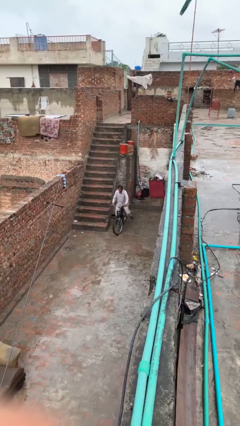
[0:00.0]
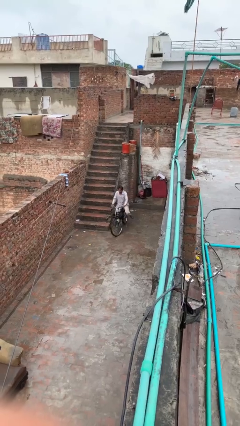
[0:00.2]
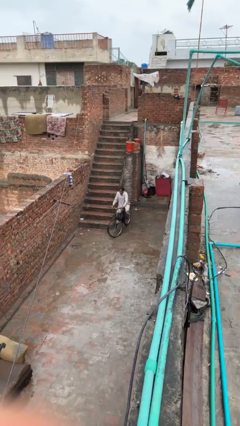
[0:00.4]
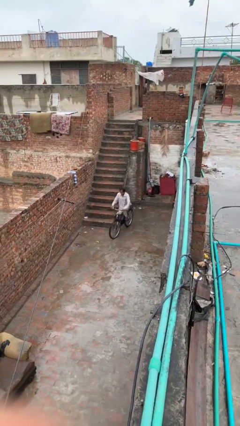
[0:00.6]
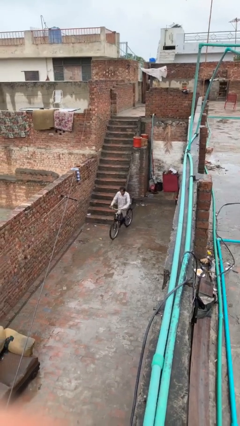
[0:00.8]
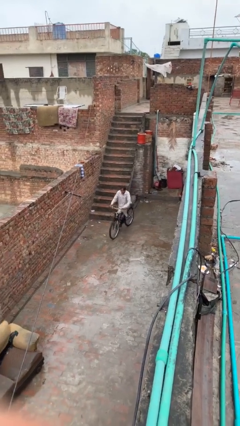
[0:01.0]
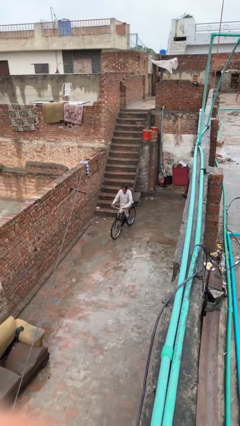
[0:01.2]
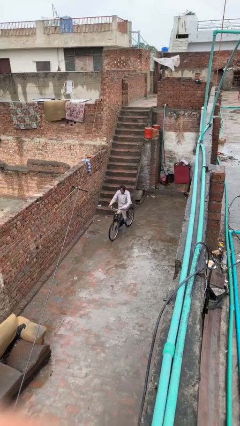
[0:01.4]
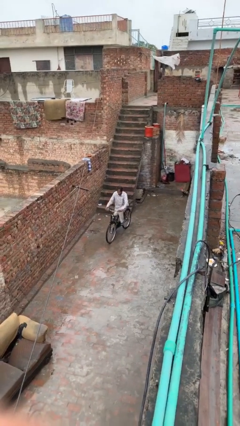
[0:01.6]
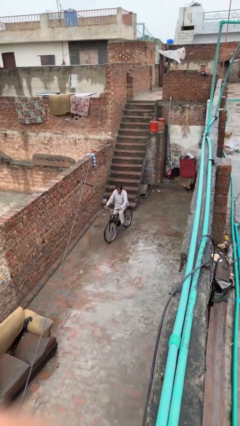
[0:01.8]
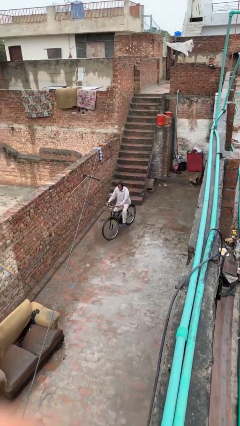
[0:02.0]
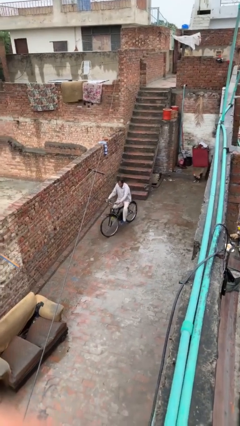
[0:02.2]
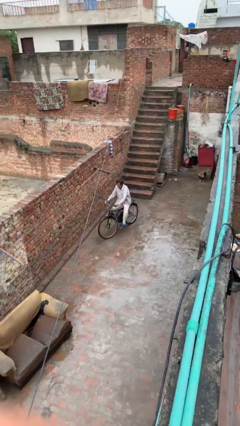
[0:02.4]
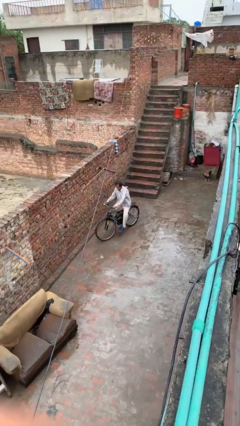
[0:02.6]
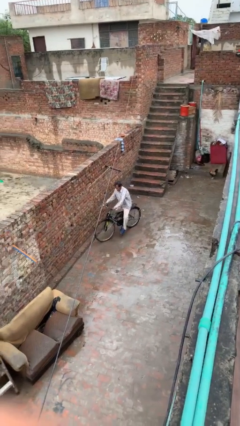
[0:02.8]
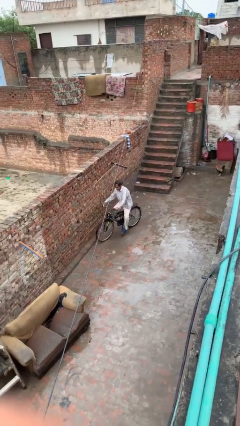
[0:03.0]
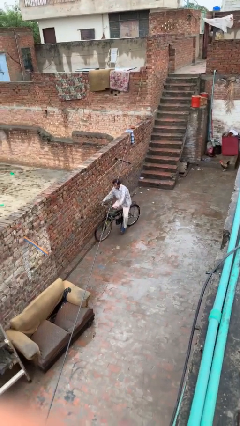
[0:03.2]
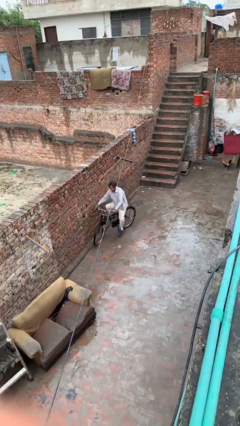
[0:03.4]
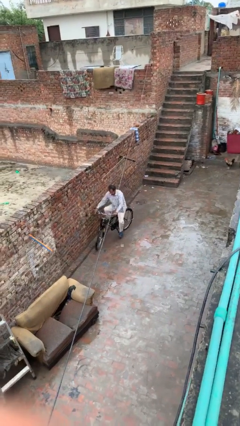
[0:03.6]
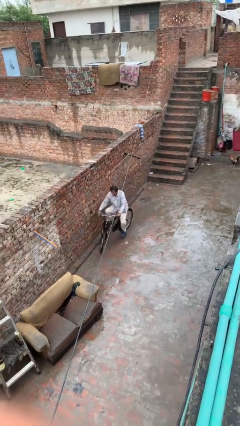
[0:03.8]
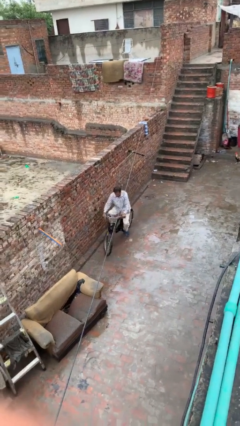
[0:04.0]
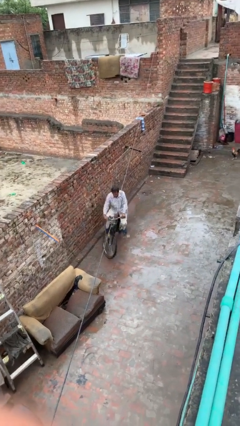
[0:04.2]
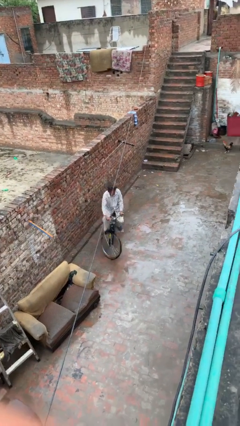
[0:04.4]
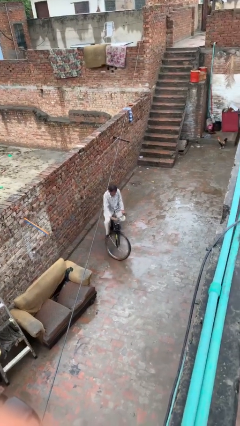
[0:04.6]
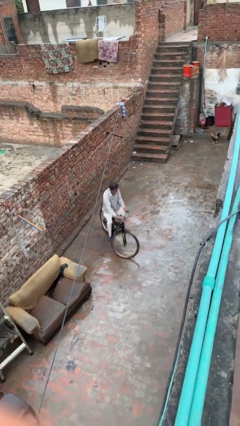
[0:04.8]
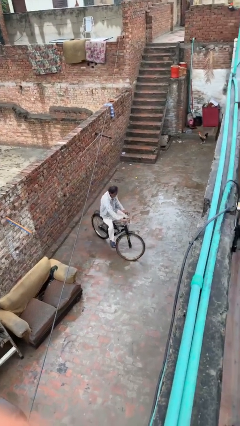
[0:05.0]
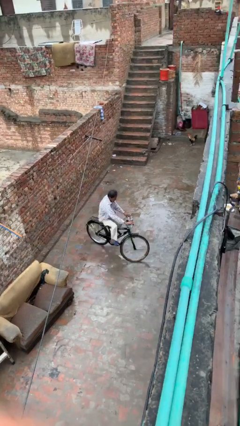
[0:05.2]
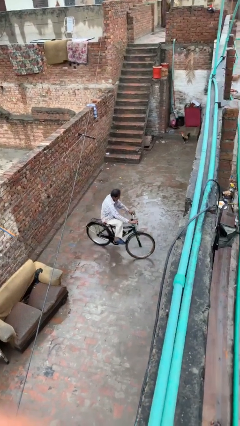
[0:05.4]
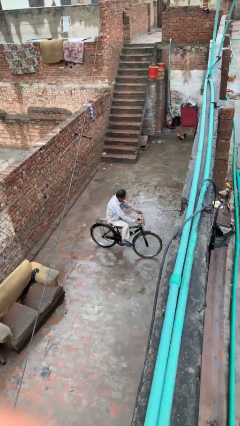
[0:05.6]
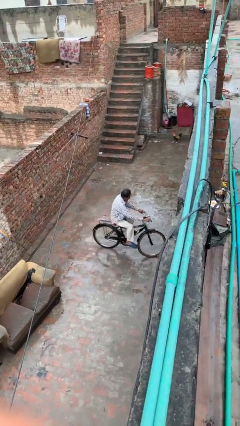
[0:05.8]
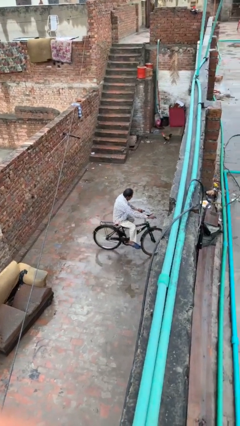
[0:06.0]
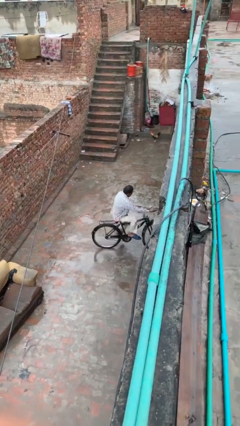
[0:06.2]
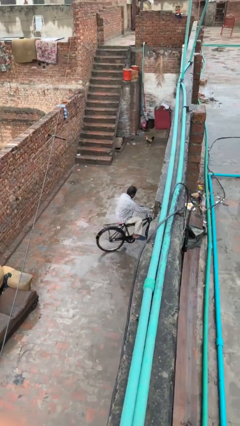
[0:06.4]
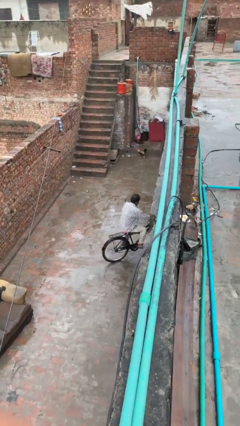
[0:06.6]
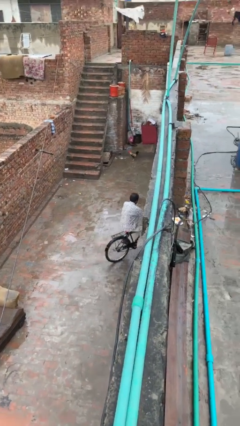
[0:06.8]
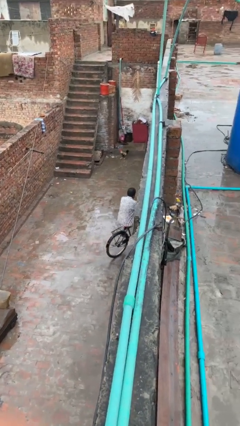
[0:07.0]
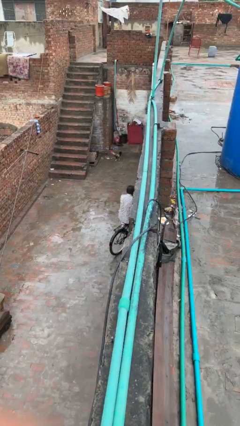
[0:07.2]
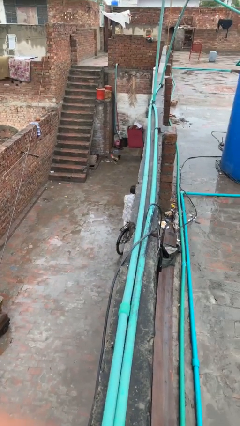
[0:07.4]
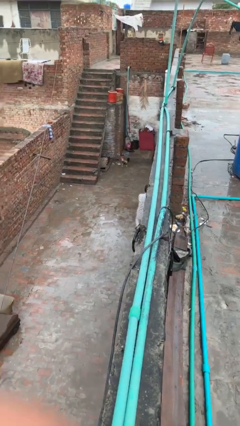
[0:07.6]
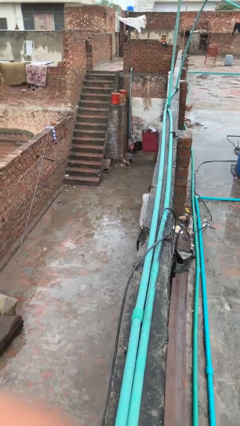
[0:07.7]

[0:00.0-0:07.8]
person rides bicycle

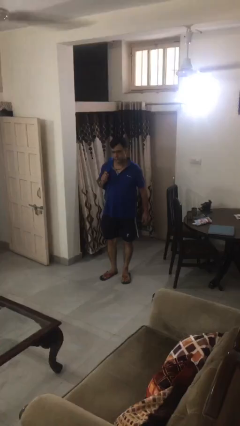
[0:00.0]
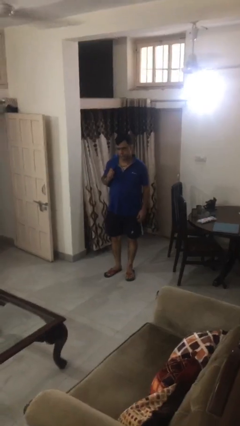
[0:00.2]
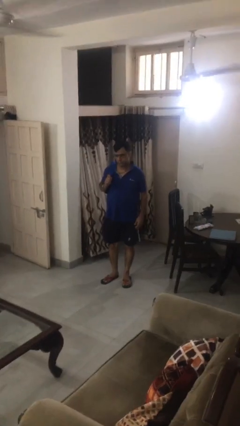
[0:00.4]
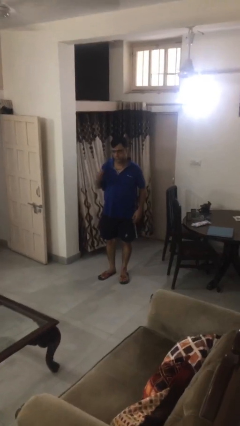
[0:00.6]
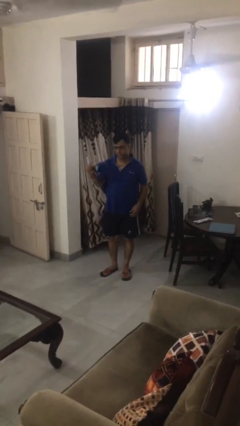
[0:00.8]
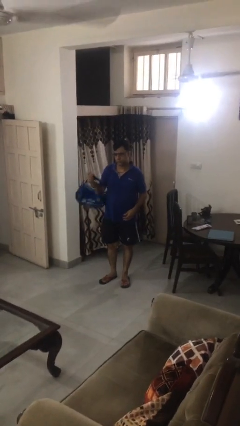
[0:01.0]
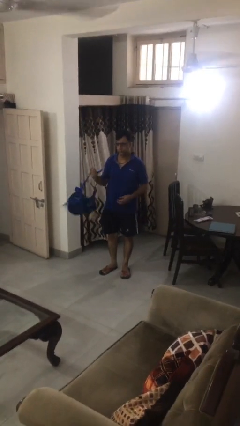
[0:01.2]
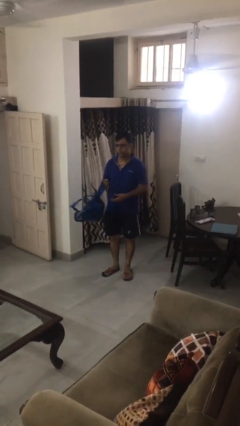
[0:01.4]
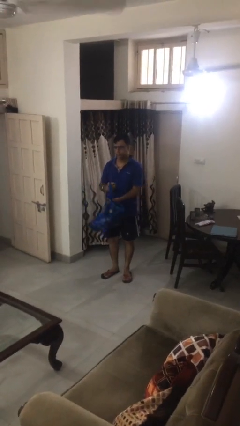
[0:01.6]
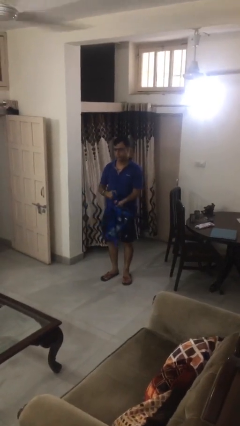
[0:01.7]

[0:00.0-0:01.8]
person takes off backpack

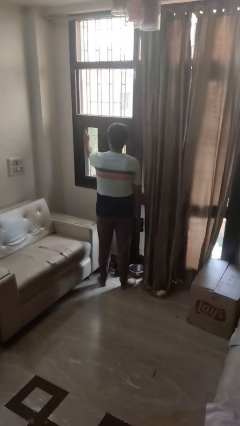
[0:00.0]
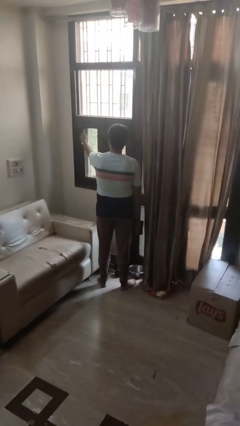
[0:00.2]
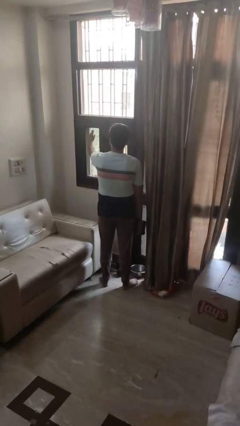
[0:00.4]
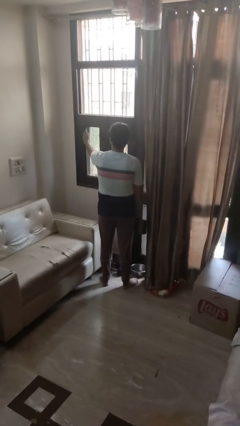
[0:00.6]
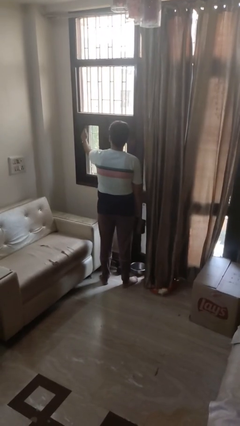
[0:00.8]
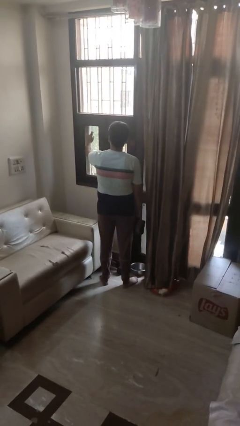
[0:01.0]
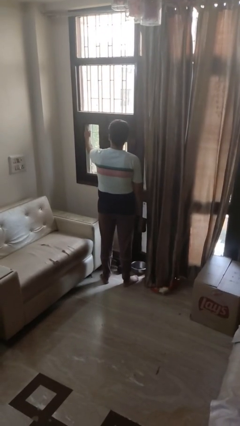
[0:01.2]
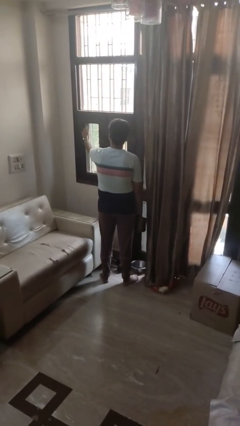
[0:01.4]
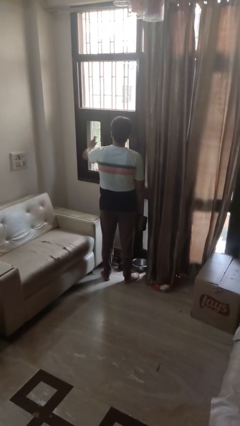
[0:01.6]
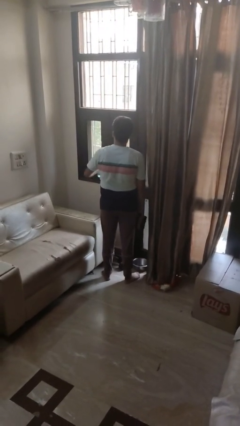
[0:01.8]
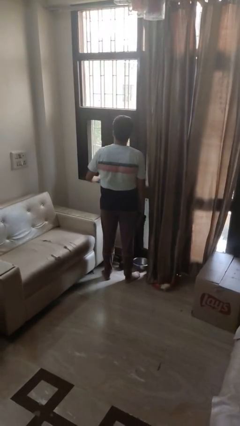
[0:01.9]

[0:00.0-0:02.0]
person sprays from bottle

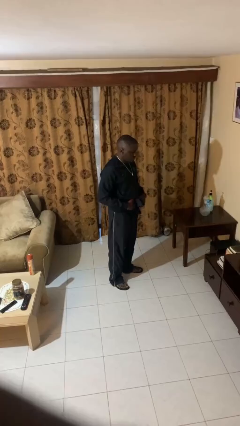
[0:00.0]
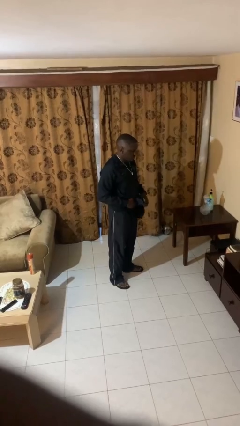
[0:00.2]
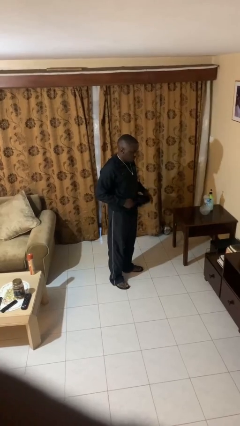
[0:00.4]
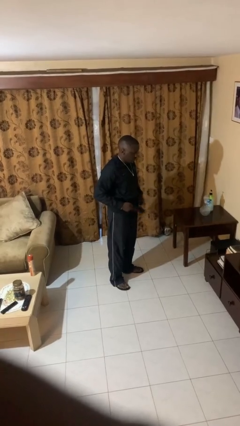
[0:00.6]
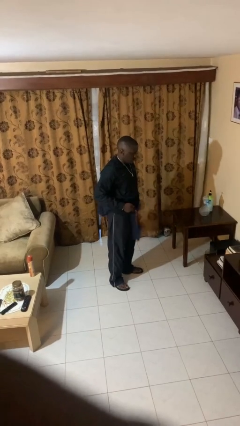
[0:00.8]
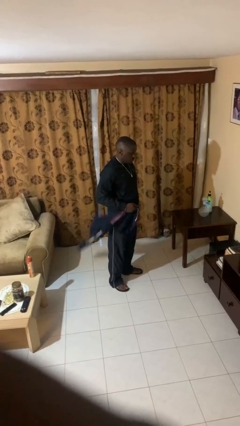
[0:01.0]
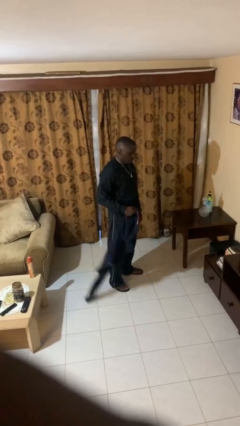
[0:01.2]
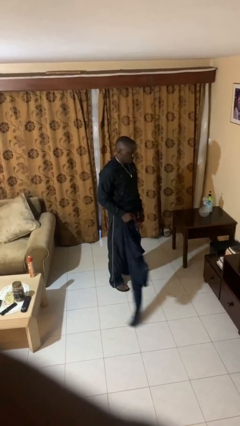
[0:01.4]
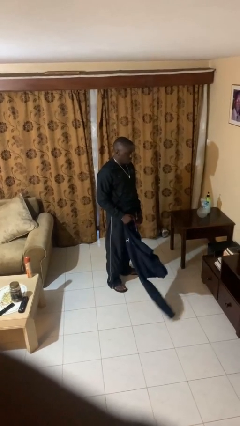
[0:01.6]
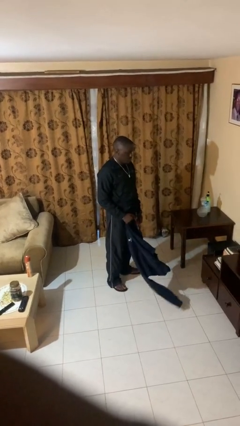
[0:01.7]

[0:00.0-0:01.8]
person unties jacket around waist

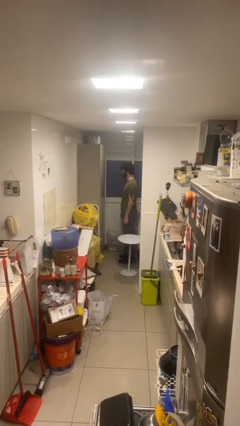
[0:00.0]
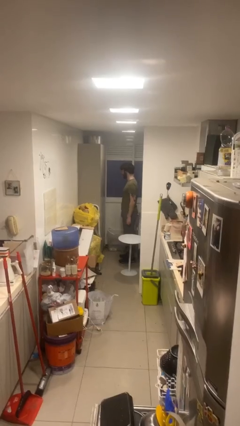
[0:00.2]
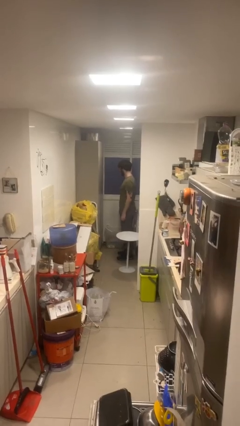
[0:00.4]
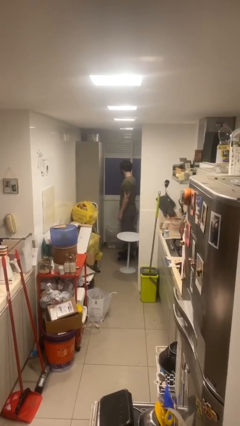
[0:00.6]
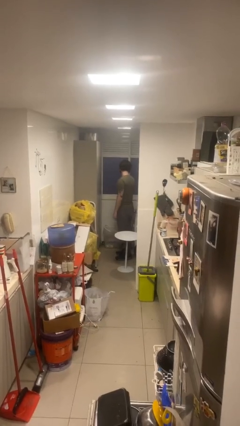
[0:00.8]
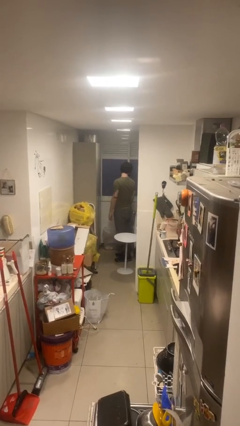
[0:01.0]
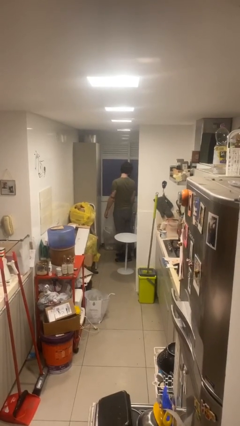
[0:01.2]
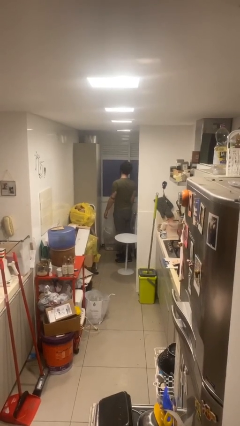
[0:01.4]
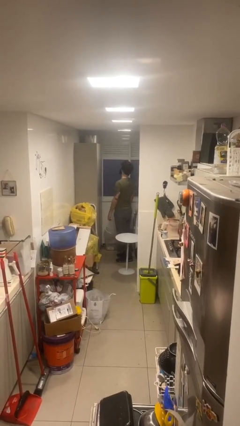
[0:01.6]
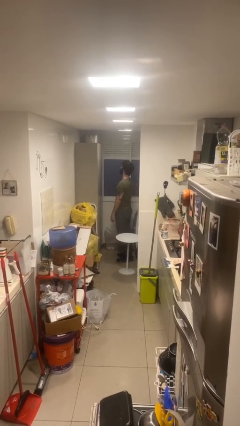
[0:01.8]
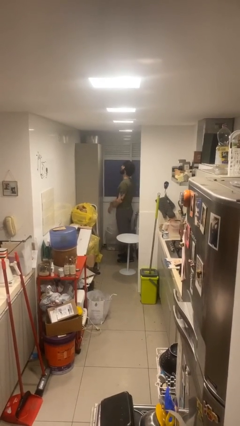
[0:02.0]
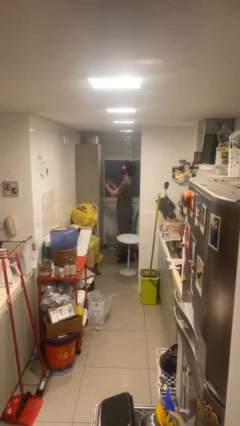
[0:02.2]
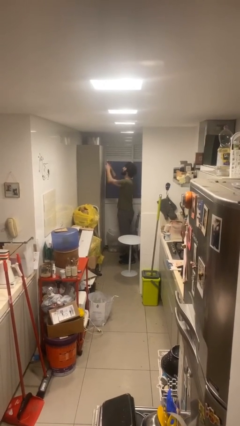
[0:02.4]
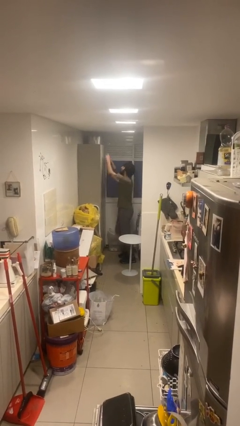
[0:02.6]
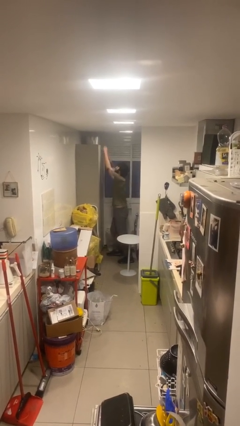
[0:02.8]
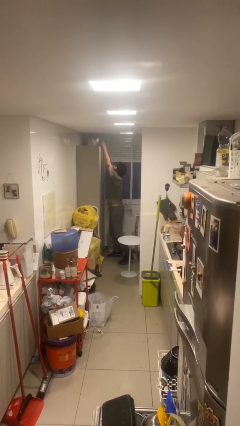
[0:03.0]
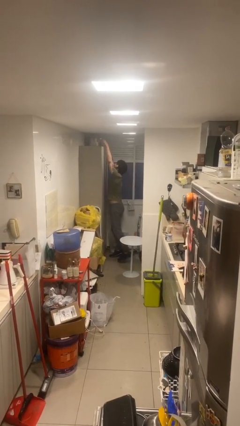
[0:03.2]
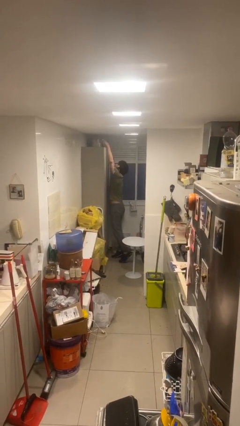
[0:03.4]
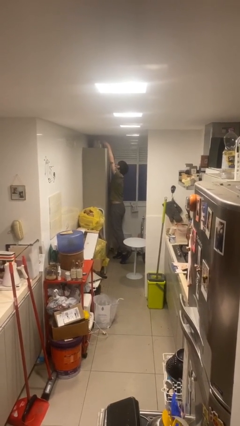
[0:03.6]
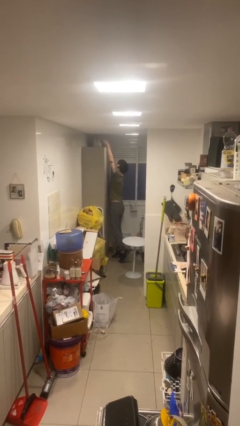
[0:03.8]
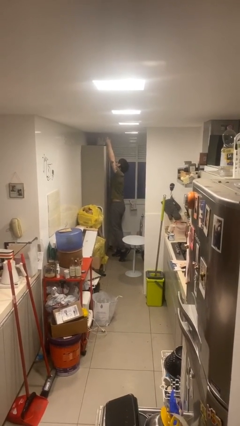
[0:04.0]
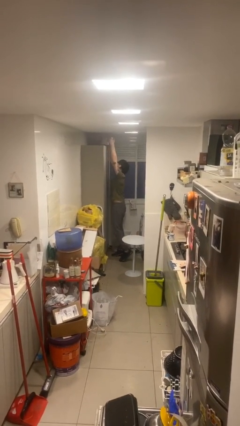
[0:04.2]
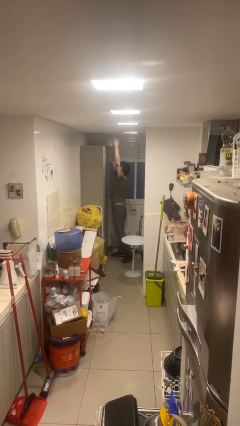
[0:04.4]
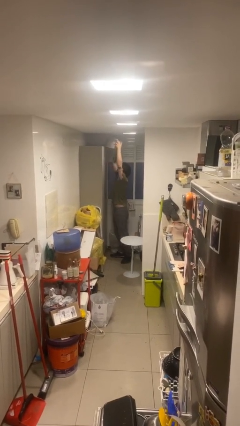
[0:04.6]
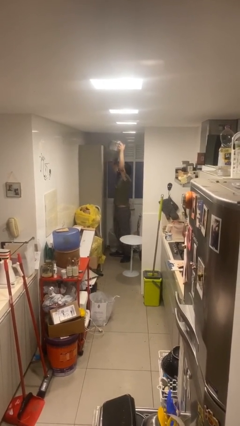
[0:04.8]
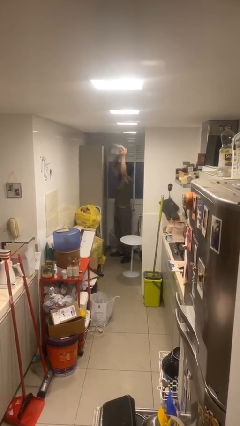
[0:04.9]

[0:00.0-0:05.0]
person picks up object from shelf
